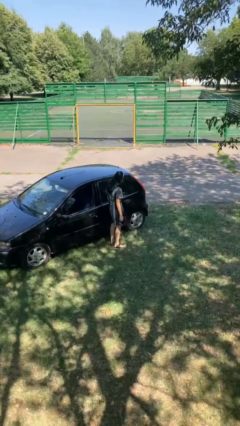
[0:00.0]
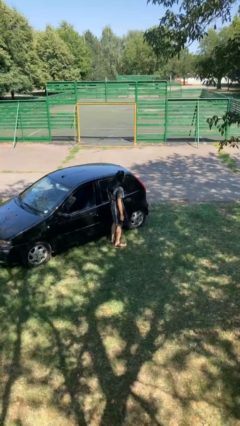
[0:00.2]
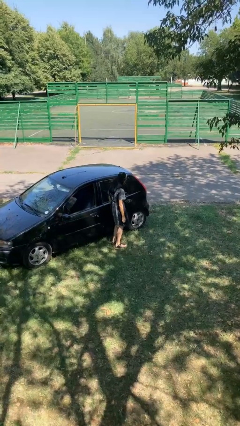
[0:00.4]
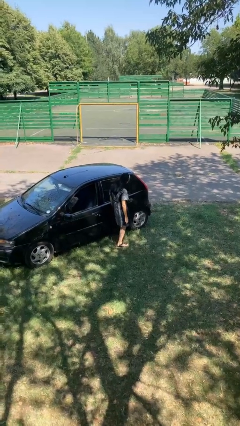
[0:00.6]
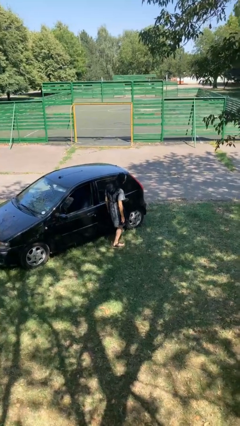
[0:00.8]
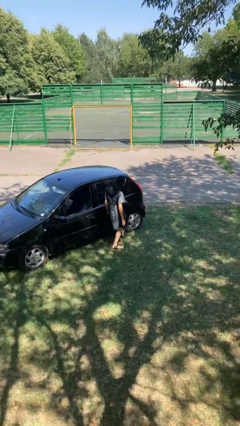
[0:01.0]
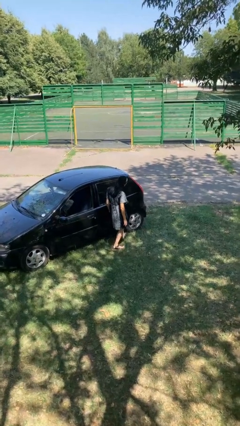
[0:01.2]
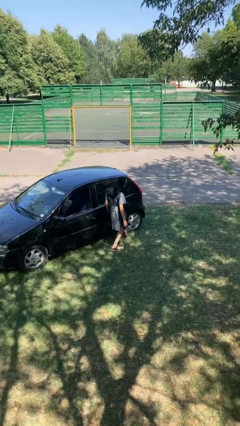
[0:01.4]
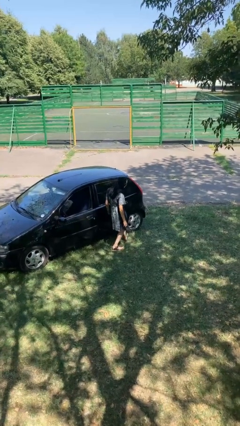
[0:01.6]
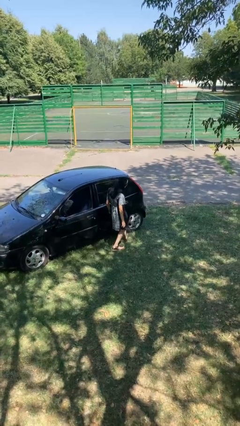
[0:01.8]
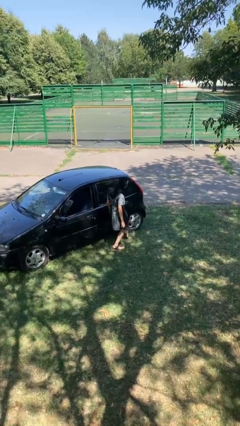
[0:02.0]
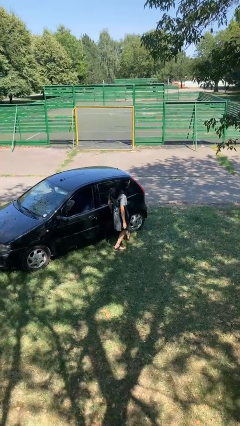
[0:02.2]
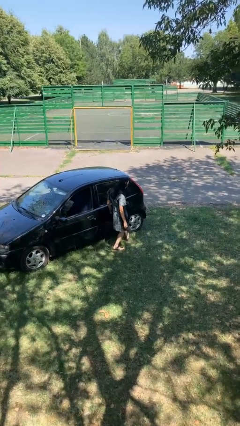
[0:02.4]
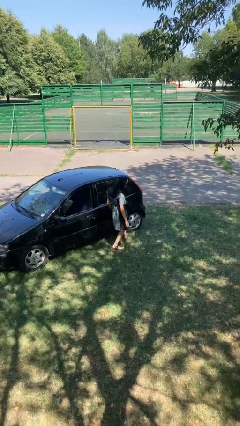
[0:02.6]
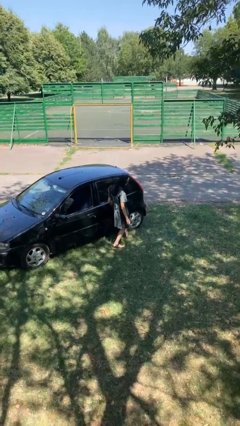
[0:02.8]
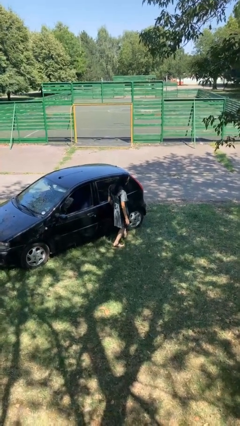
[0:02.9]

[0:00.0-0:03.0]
person kicks car tires

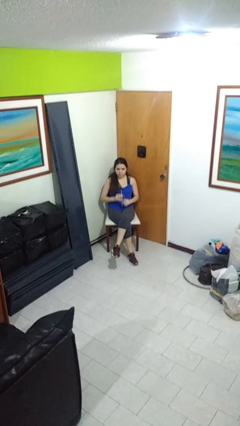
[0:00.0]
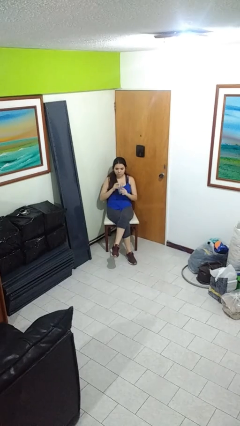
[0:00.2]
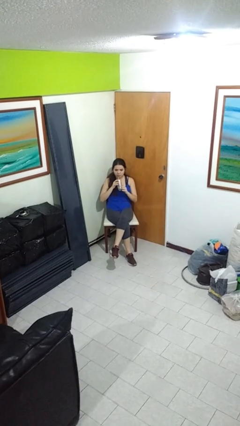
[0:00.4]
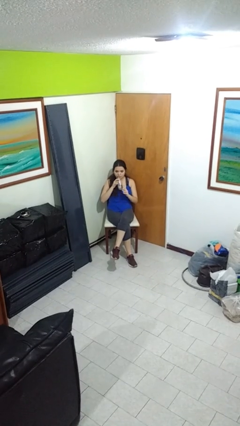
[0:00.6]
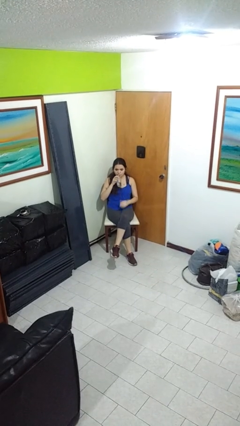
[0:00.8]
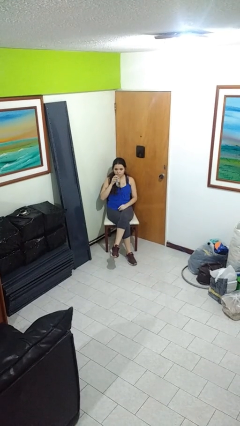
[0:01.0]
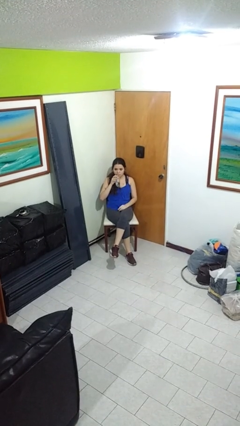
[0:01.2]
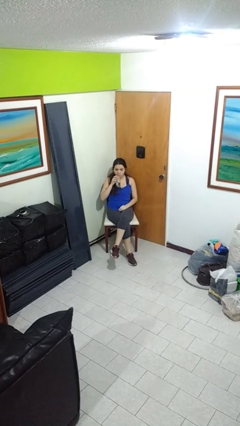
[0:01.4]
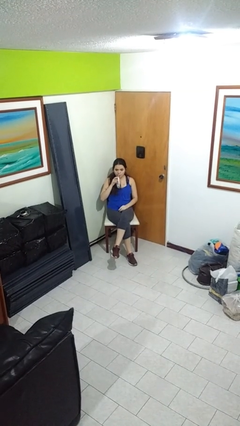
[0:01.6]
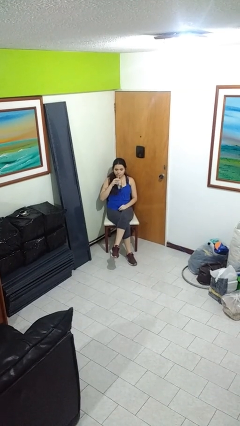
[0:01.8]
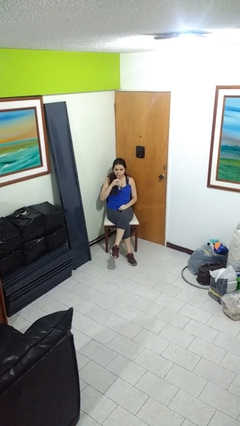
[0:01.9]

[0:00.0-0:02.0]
person drinks from straw

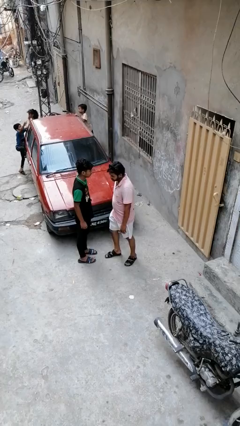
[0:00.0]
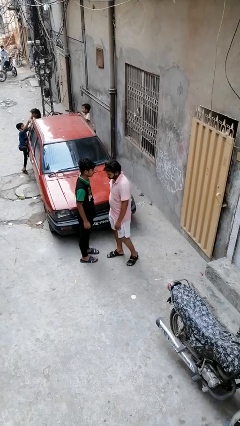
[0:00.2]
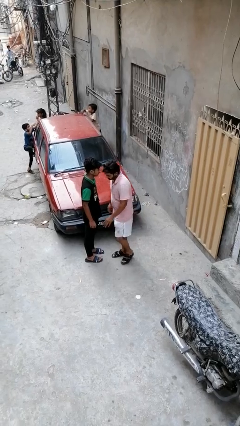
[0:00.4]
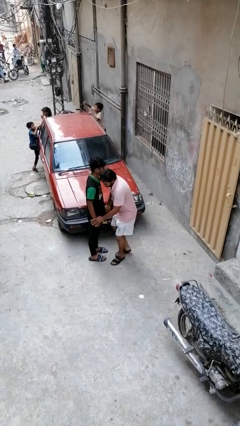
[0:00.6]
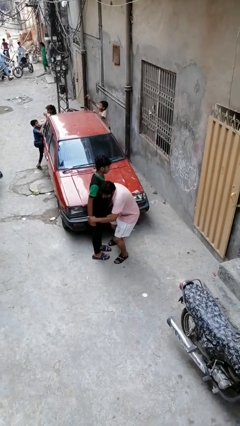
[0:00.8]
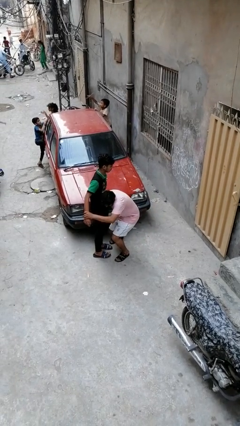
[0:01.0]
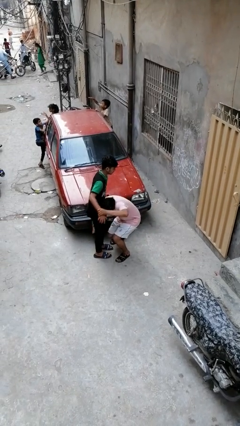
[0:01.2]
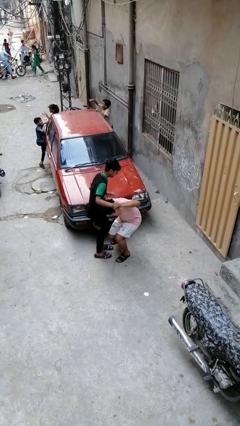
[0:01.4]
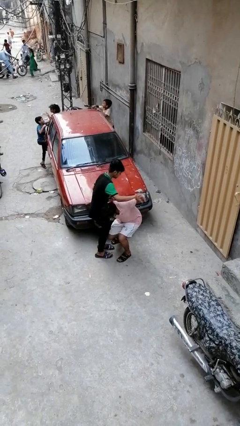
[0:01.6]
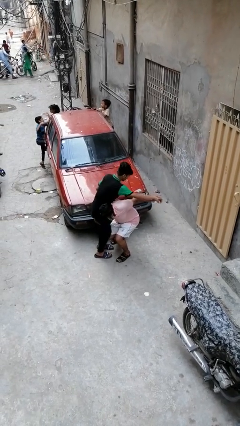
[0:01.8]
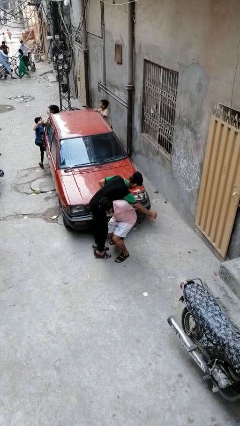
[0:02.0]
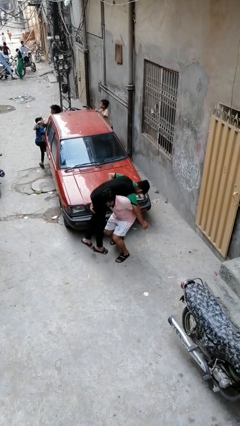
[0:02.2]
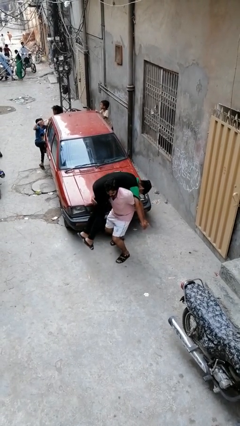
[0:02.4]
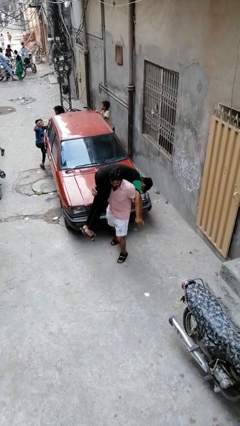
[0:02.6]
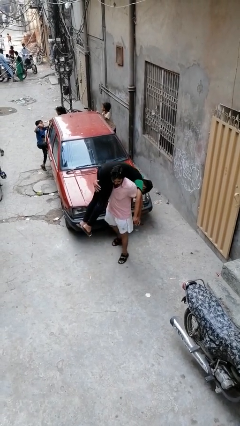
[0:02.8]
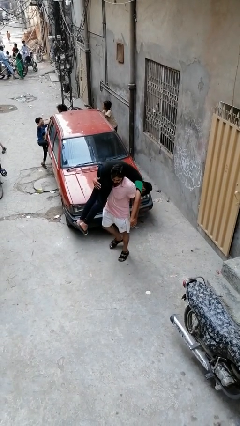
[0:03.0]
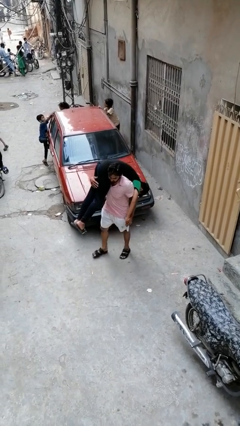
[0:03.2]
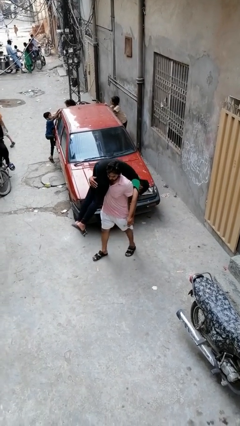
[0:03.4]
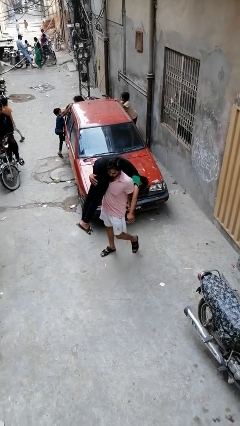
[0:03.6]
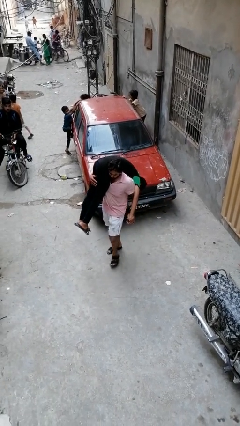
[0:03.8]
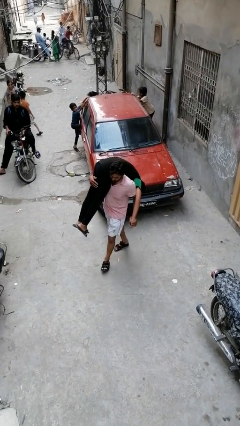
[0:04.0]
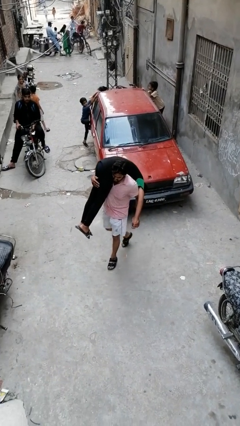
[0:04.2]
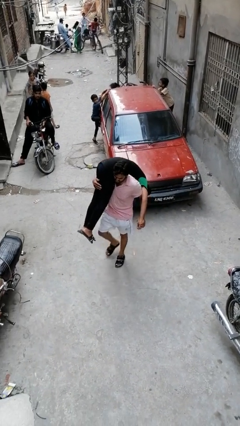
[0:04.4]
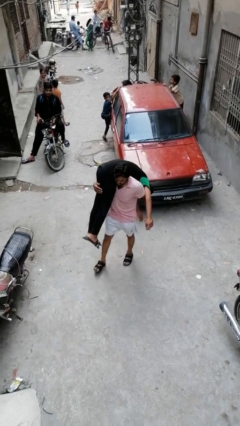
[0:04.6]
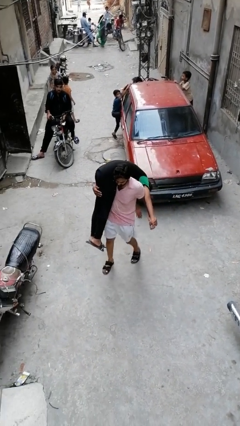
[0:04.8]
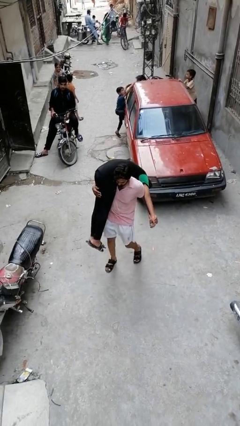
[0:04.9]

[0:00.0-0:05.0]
person carries person over shoulder

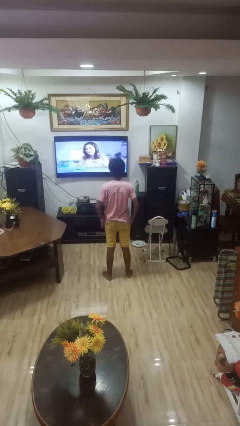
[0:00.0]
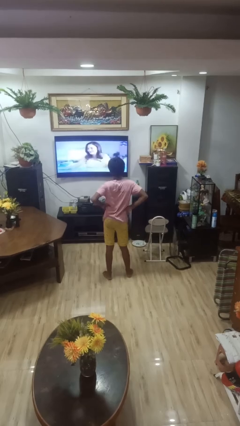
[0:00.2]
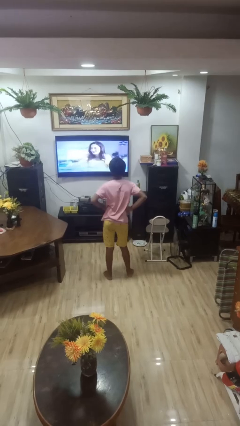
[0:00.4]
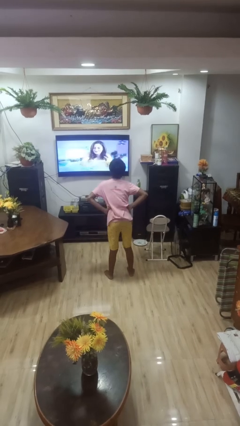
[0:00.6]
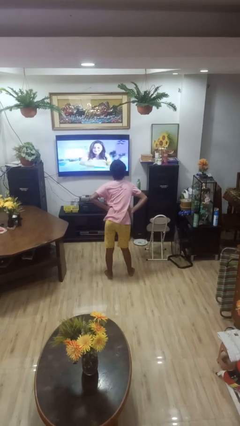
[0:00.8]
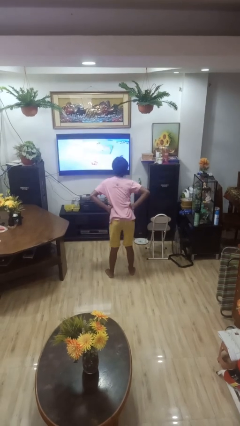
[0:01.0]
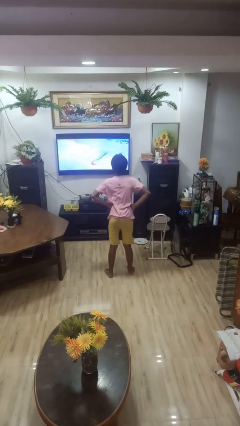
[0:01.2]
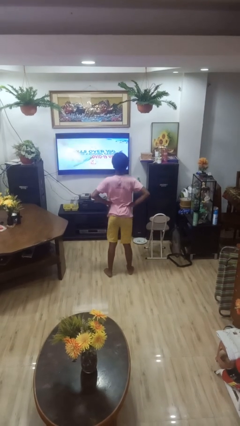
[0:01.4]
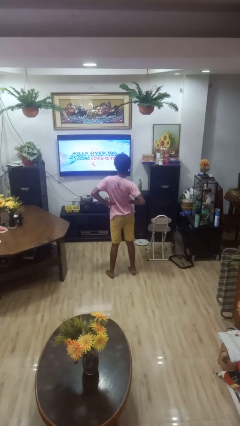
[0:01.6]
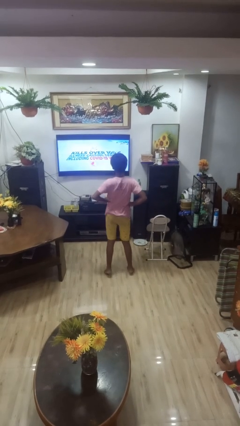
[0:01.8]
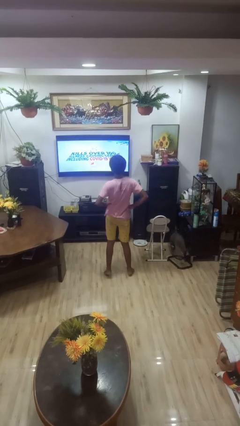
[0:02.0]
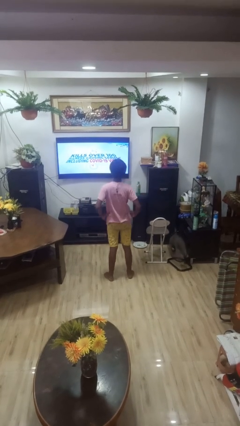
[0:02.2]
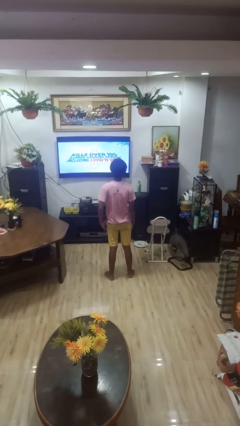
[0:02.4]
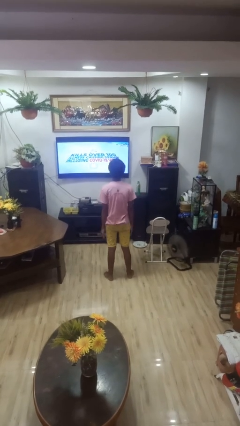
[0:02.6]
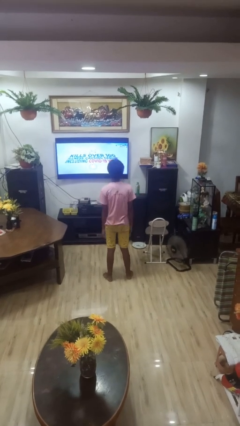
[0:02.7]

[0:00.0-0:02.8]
person wiggles hips

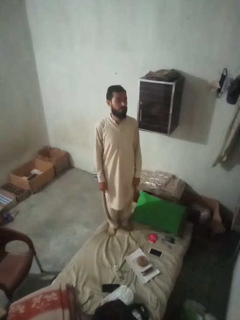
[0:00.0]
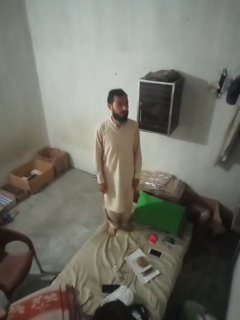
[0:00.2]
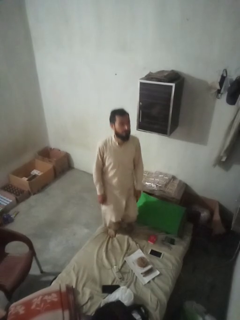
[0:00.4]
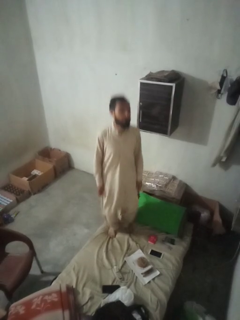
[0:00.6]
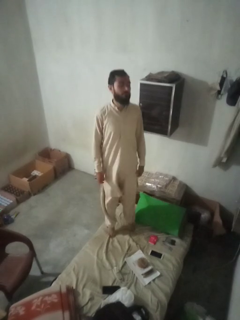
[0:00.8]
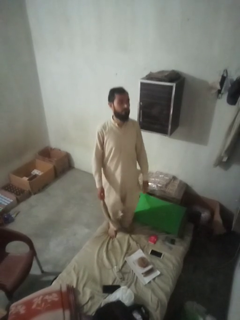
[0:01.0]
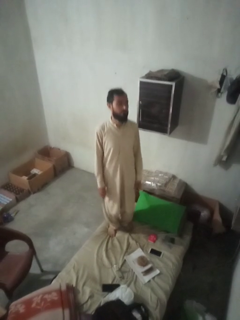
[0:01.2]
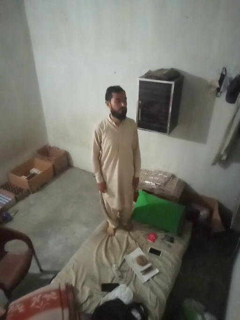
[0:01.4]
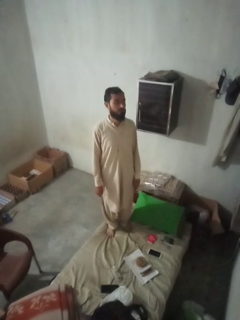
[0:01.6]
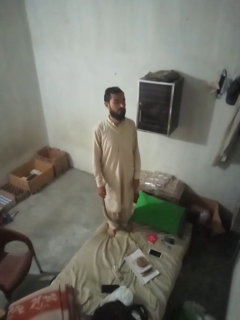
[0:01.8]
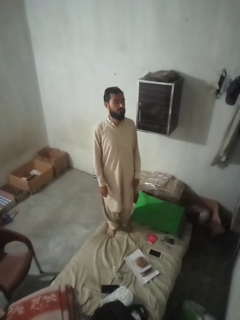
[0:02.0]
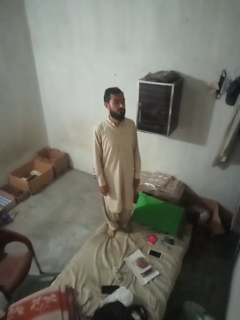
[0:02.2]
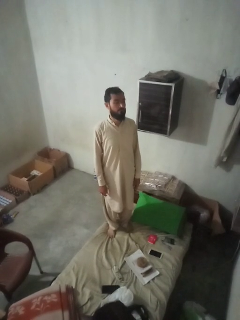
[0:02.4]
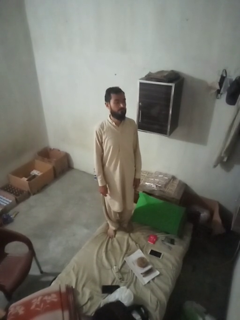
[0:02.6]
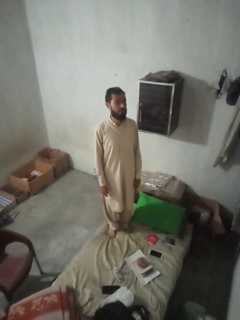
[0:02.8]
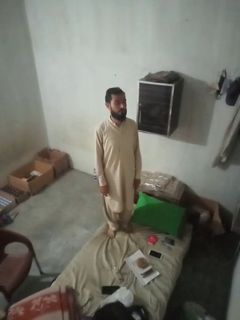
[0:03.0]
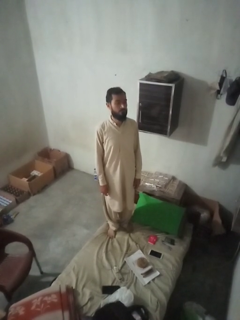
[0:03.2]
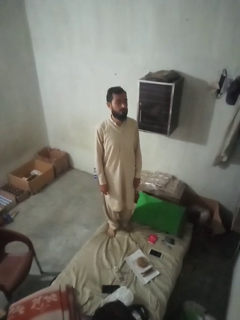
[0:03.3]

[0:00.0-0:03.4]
person jumps on bed

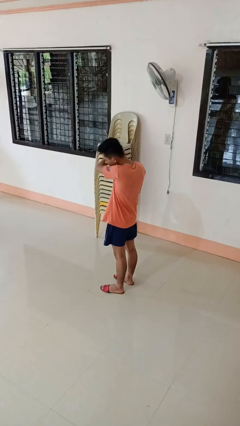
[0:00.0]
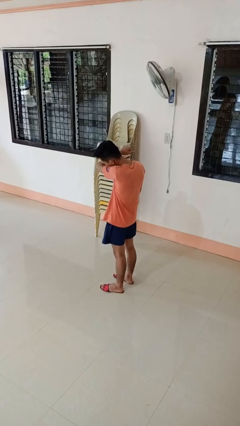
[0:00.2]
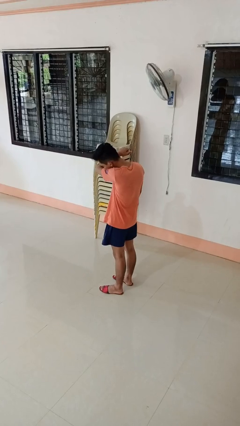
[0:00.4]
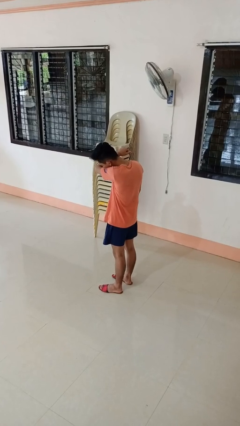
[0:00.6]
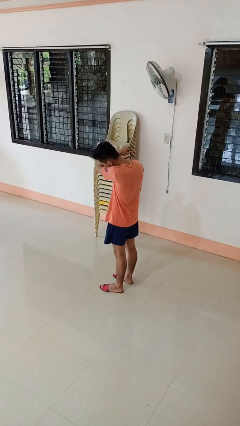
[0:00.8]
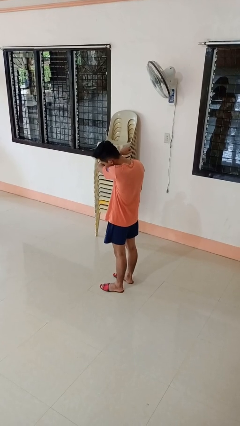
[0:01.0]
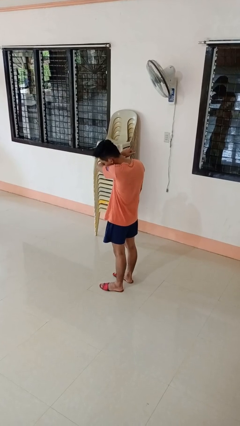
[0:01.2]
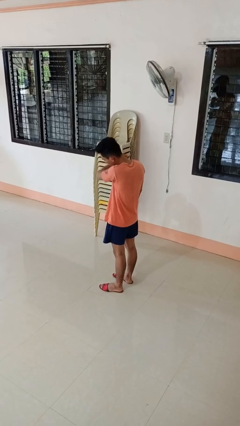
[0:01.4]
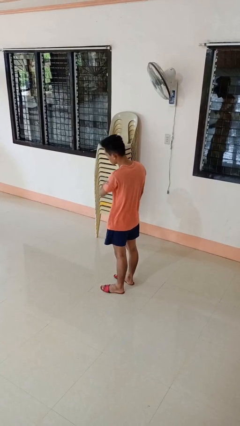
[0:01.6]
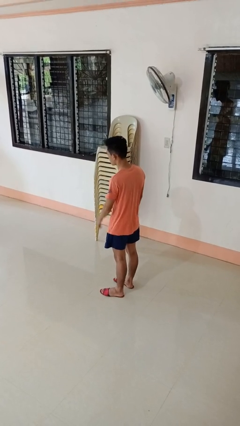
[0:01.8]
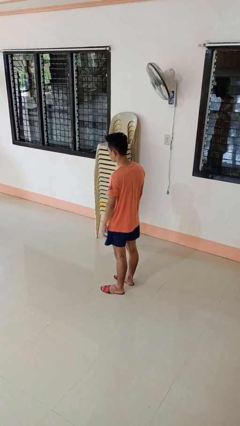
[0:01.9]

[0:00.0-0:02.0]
person sneezes into arm
